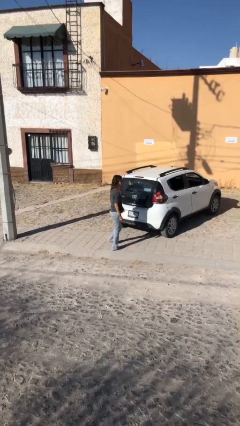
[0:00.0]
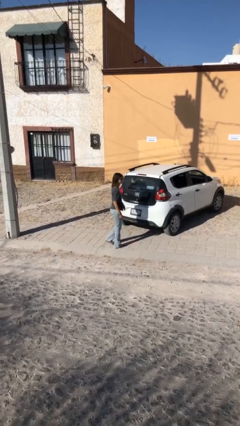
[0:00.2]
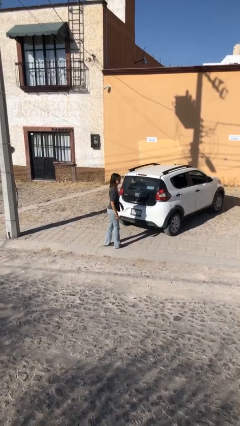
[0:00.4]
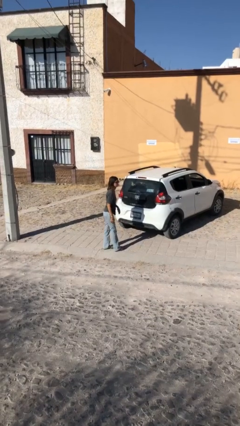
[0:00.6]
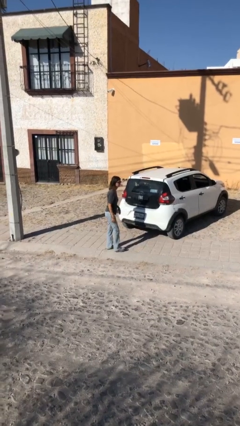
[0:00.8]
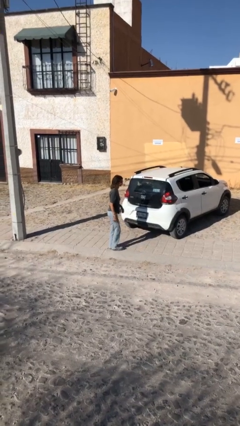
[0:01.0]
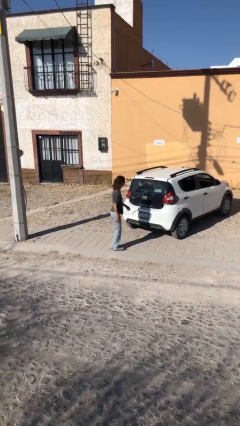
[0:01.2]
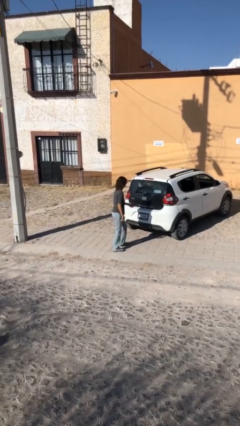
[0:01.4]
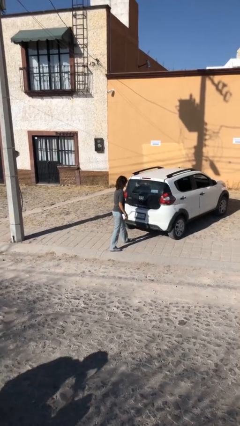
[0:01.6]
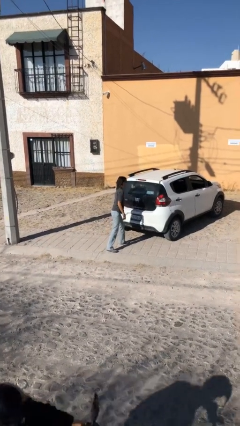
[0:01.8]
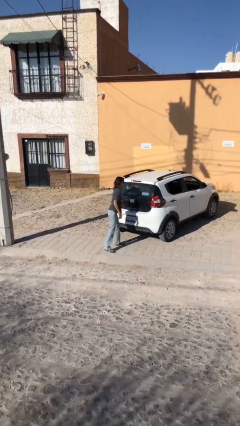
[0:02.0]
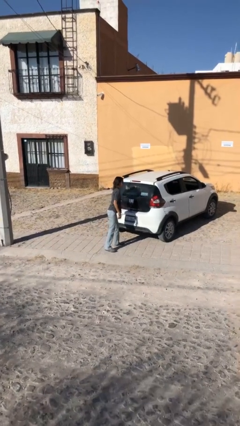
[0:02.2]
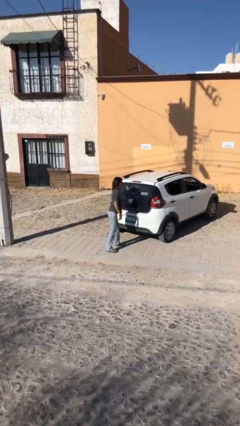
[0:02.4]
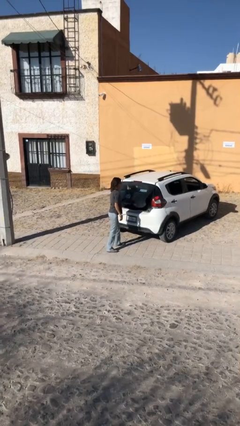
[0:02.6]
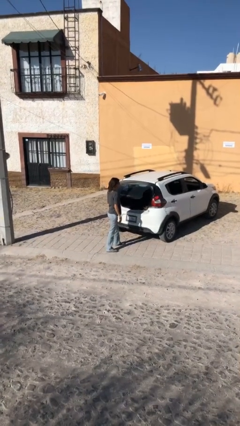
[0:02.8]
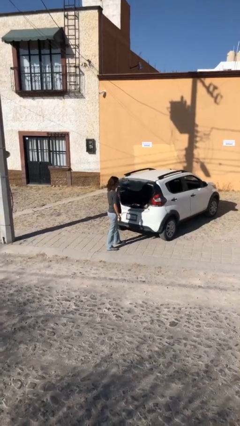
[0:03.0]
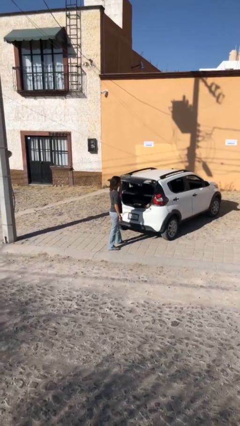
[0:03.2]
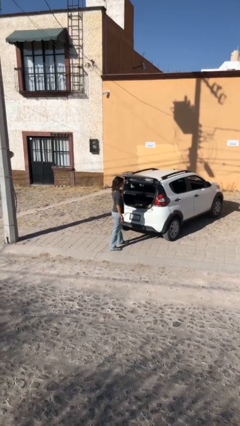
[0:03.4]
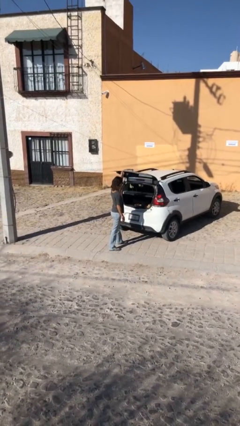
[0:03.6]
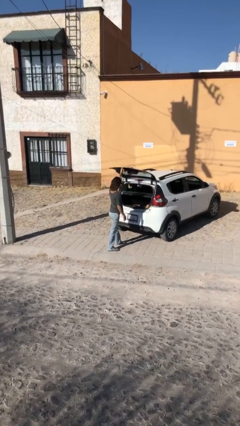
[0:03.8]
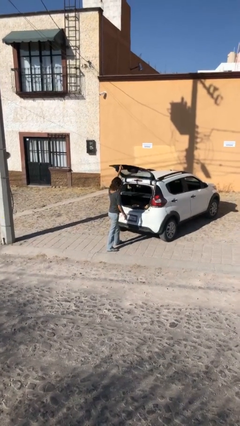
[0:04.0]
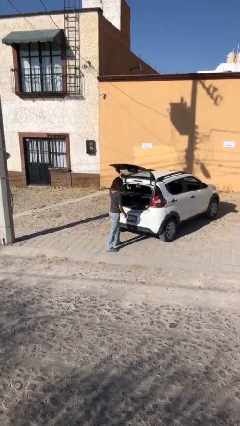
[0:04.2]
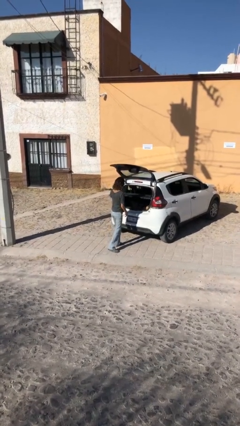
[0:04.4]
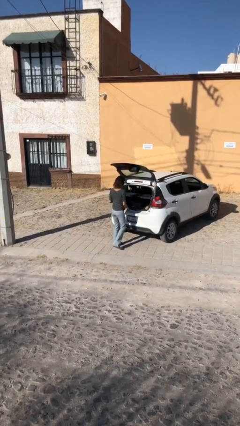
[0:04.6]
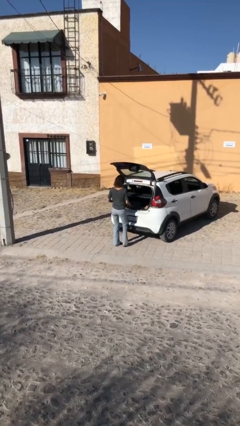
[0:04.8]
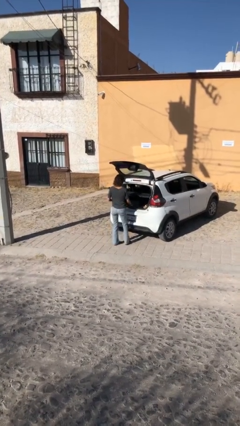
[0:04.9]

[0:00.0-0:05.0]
person opens car trunk

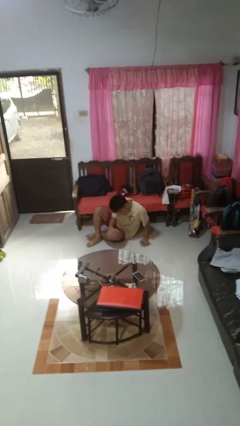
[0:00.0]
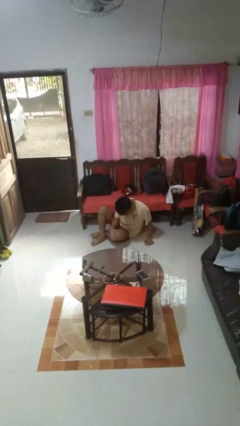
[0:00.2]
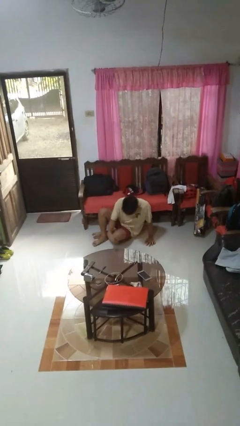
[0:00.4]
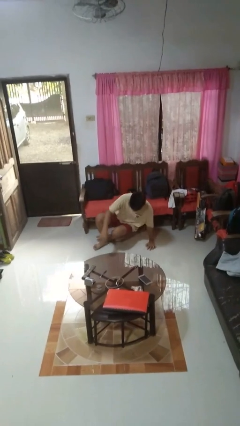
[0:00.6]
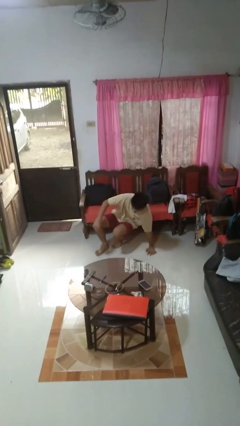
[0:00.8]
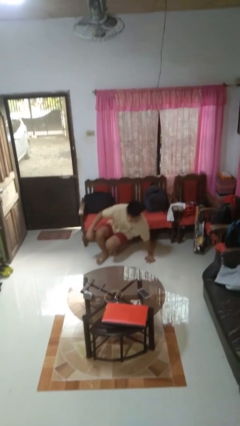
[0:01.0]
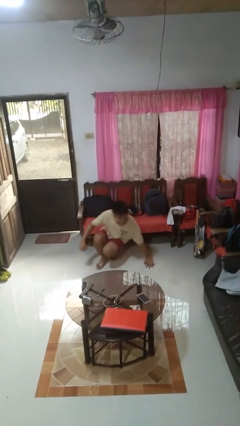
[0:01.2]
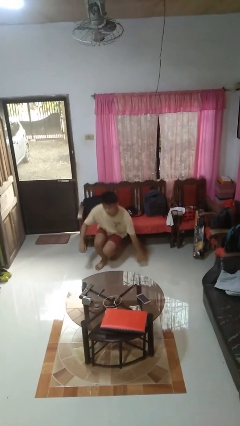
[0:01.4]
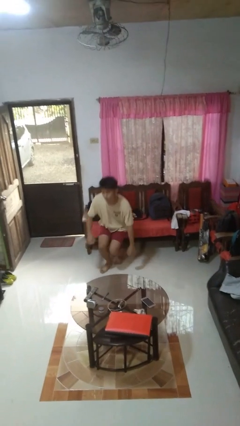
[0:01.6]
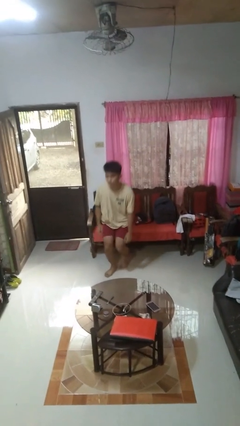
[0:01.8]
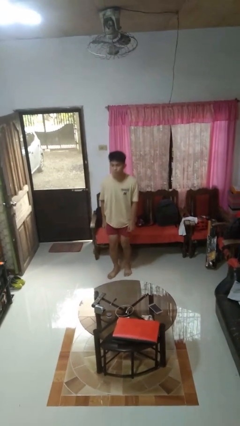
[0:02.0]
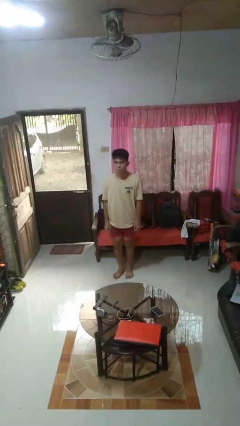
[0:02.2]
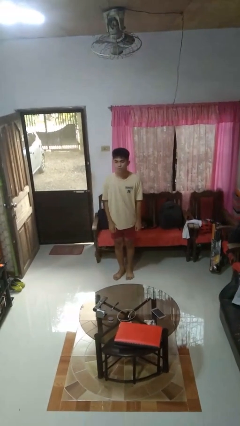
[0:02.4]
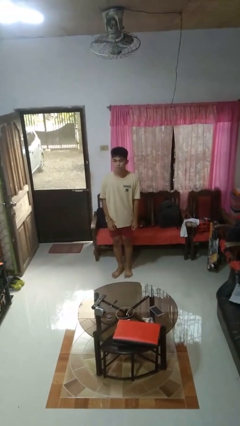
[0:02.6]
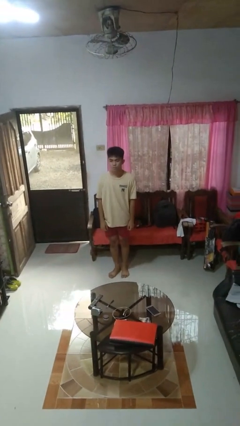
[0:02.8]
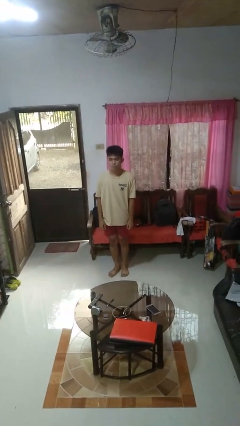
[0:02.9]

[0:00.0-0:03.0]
person stands up from floor

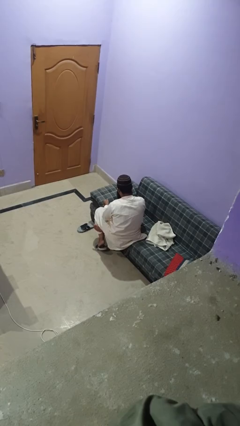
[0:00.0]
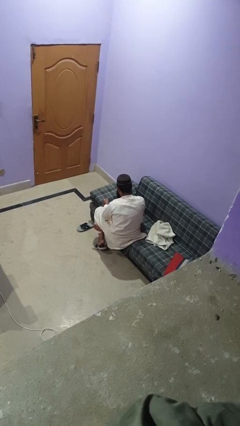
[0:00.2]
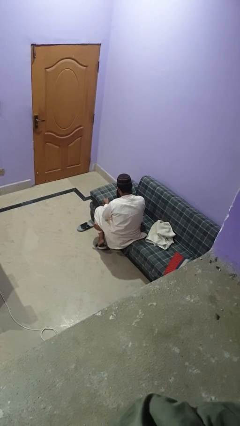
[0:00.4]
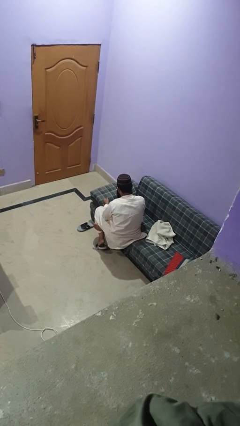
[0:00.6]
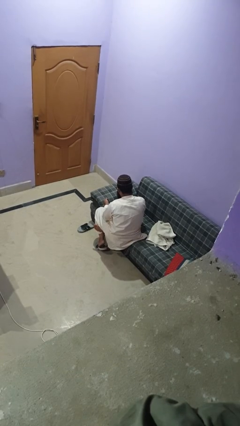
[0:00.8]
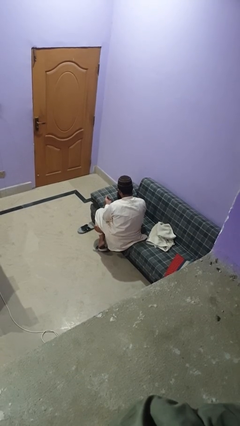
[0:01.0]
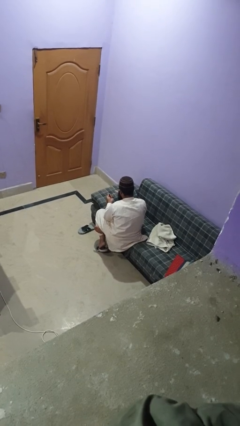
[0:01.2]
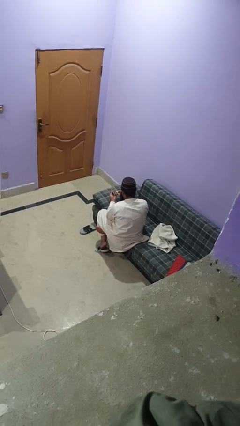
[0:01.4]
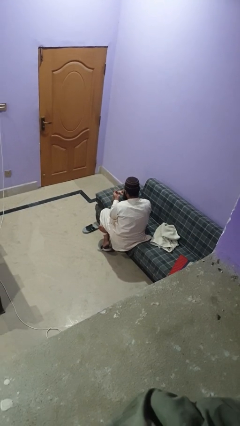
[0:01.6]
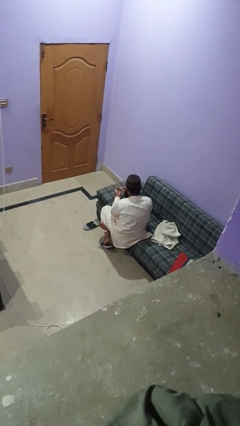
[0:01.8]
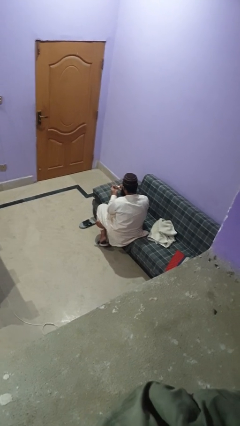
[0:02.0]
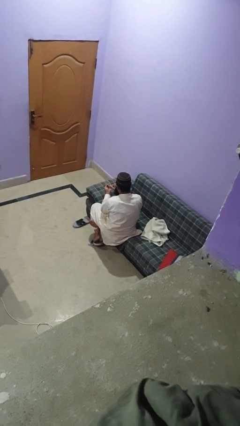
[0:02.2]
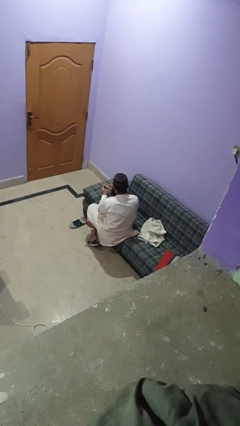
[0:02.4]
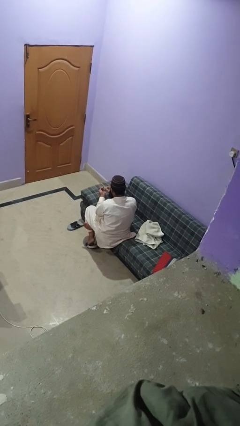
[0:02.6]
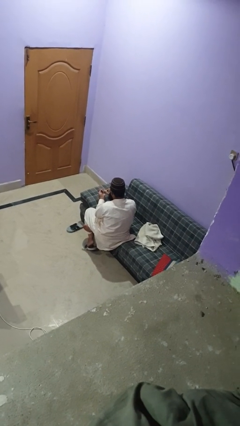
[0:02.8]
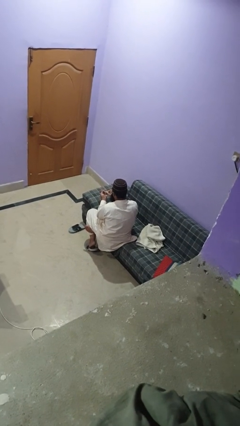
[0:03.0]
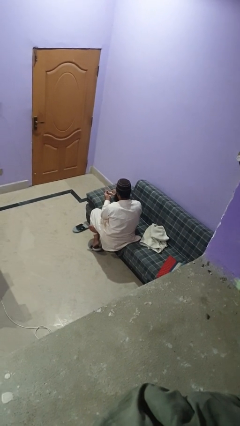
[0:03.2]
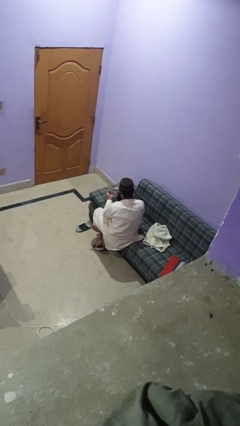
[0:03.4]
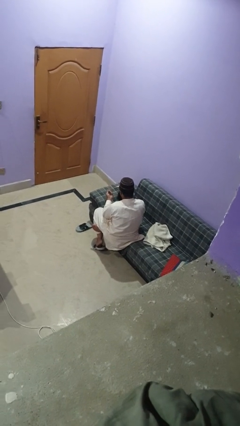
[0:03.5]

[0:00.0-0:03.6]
person paints fingernails

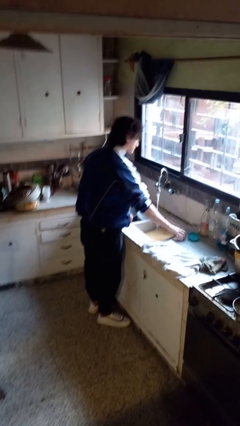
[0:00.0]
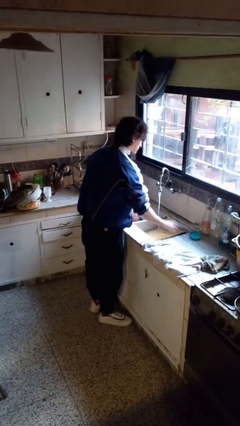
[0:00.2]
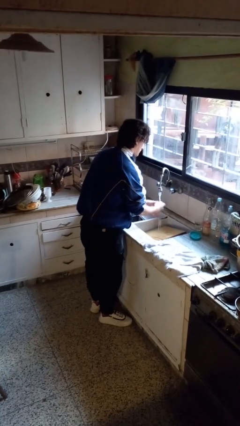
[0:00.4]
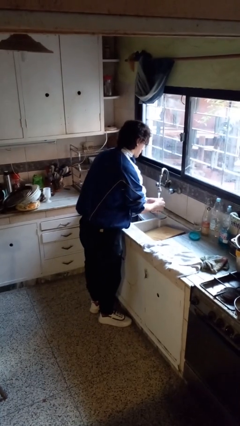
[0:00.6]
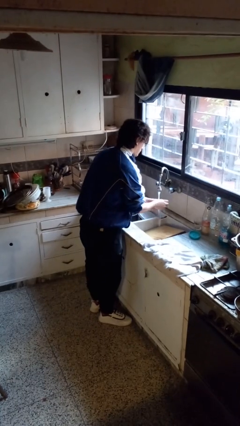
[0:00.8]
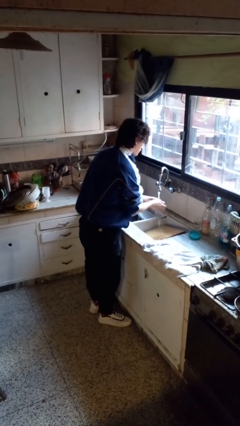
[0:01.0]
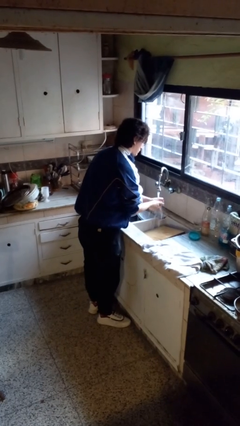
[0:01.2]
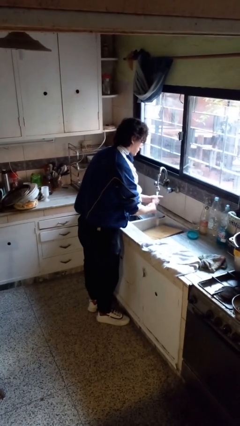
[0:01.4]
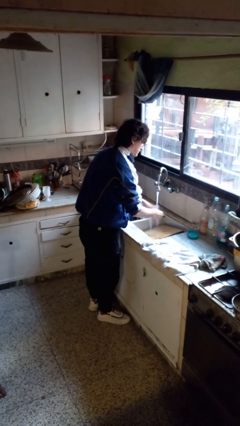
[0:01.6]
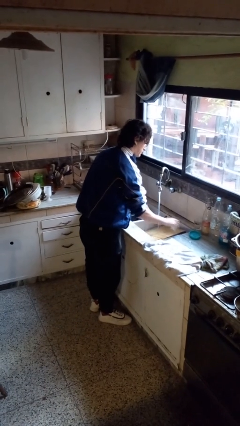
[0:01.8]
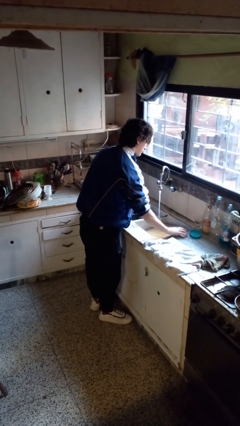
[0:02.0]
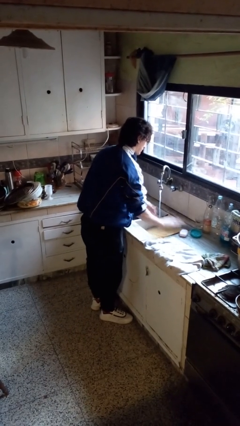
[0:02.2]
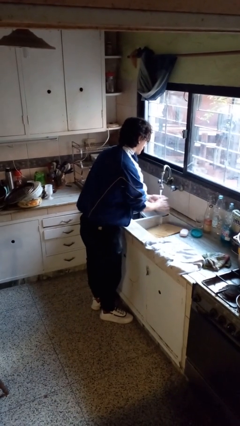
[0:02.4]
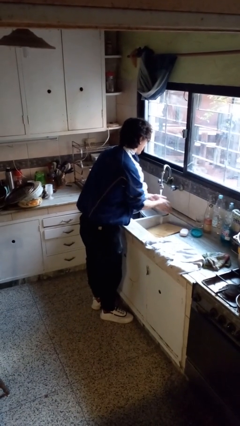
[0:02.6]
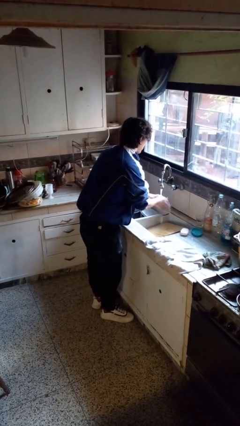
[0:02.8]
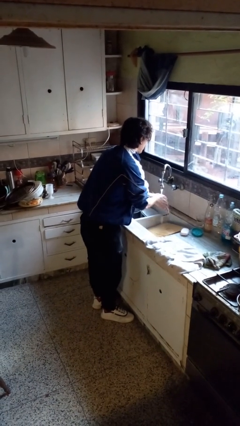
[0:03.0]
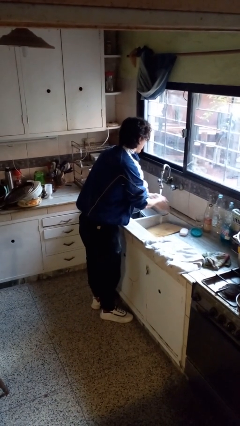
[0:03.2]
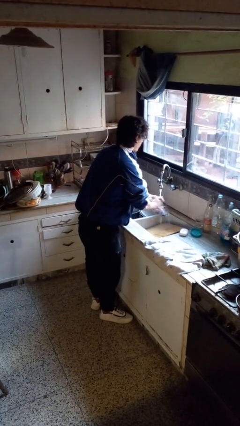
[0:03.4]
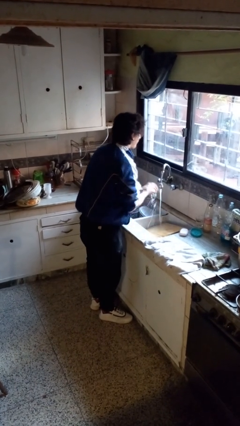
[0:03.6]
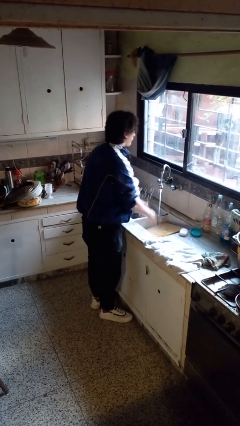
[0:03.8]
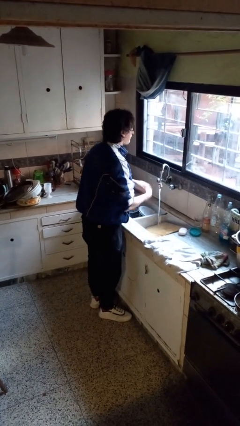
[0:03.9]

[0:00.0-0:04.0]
person washes hands
